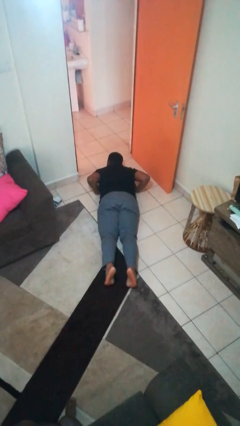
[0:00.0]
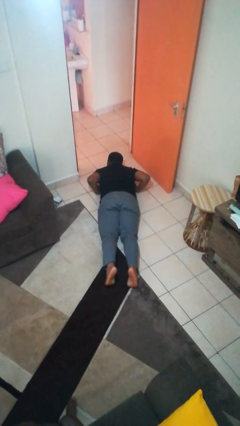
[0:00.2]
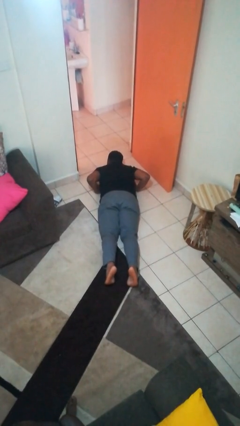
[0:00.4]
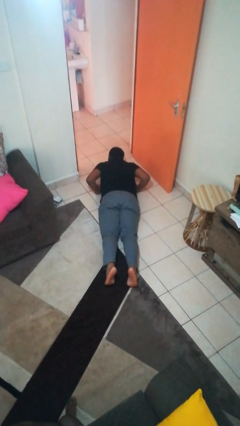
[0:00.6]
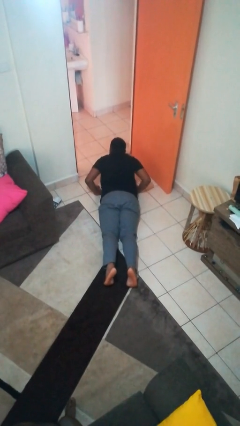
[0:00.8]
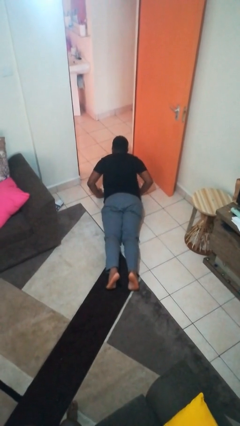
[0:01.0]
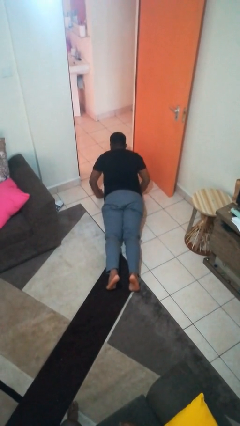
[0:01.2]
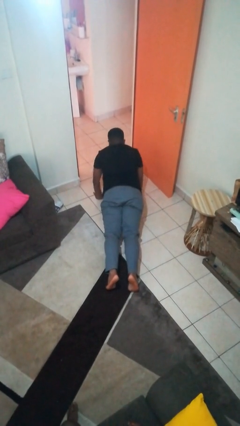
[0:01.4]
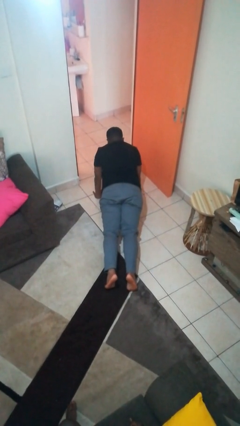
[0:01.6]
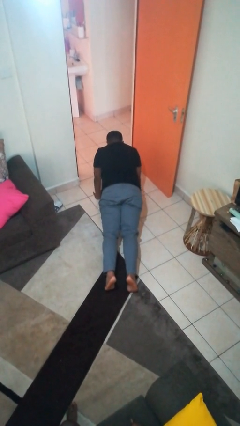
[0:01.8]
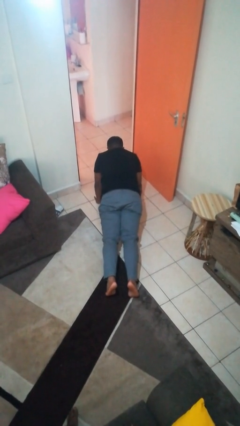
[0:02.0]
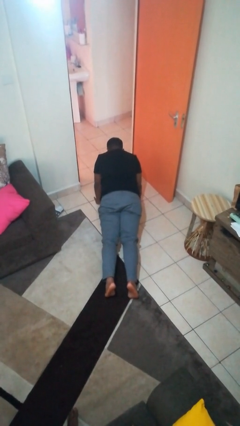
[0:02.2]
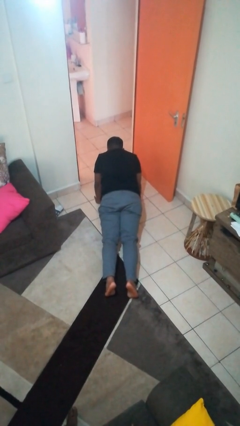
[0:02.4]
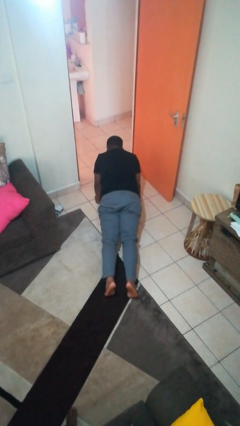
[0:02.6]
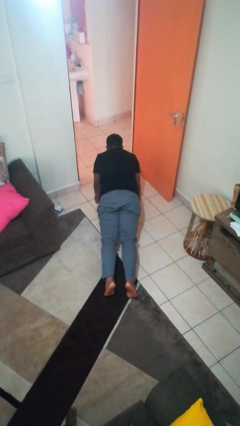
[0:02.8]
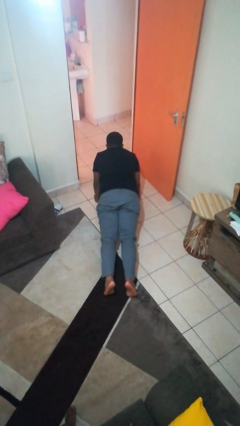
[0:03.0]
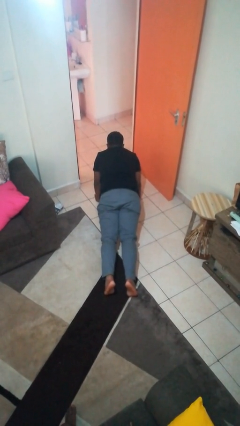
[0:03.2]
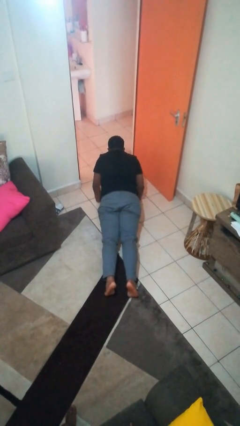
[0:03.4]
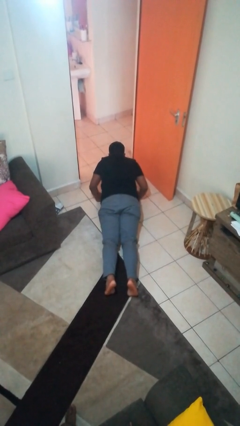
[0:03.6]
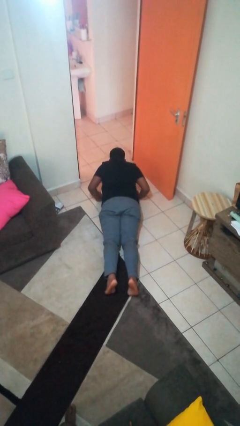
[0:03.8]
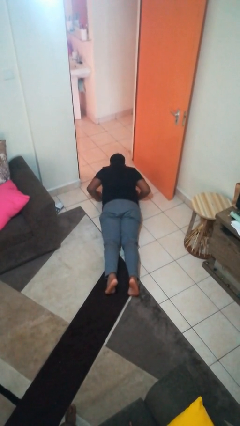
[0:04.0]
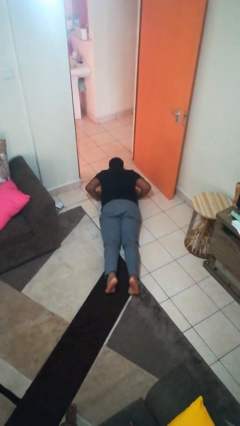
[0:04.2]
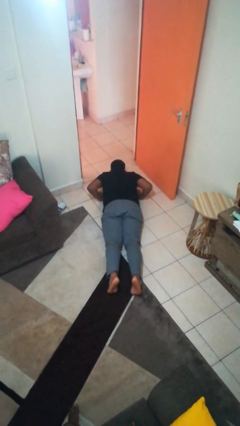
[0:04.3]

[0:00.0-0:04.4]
person exercises with pushup

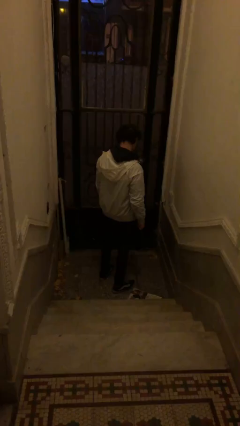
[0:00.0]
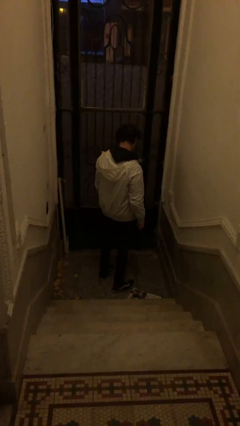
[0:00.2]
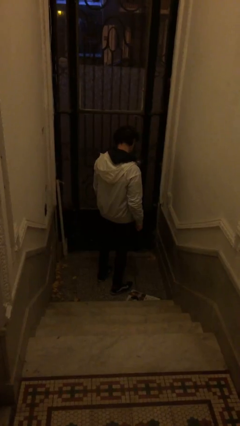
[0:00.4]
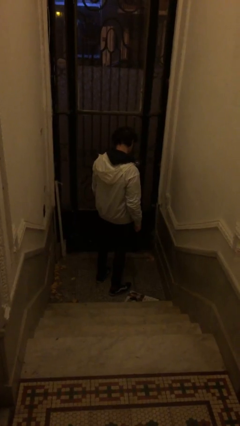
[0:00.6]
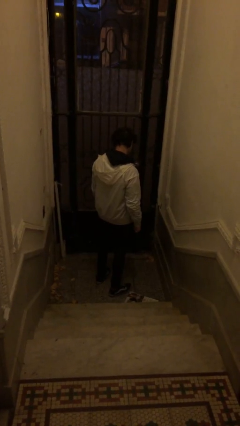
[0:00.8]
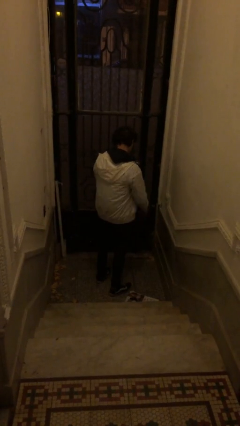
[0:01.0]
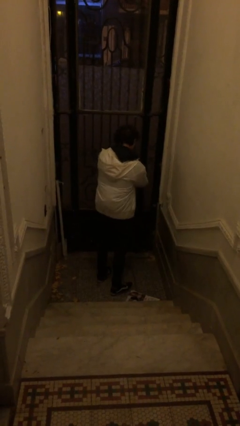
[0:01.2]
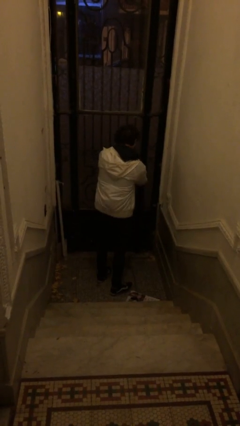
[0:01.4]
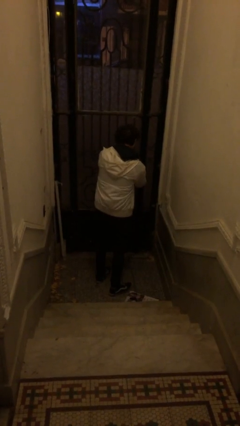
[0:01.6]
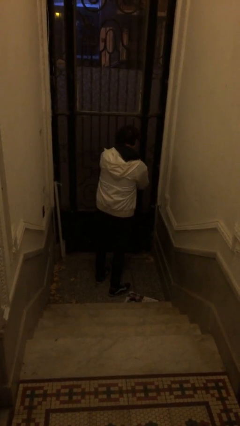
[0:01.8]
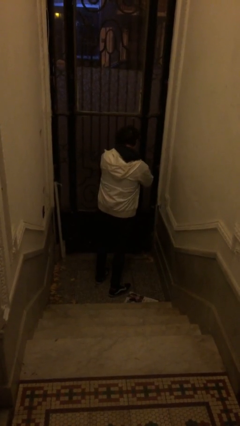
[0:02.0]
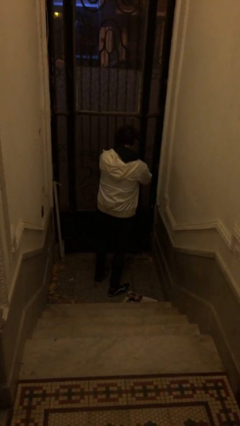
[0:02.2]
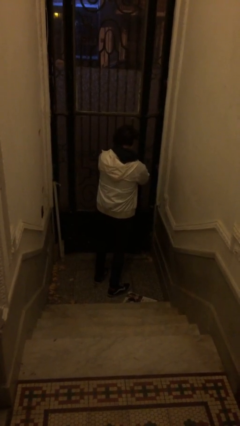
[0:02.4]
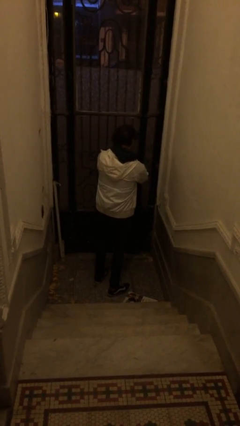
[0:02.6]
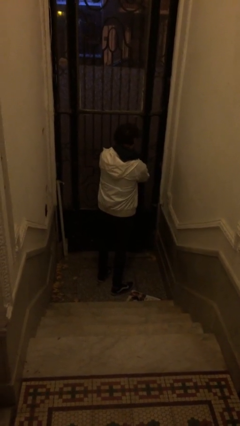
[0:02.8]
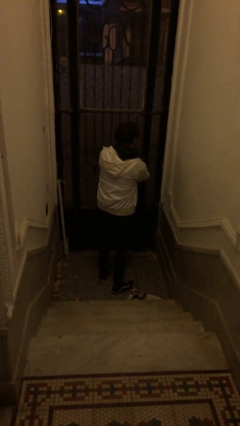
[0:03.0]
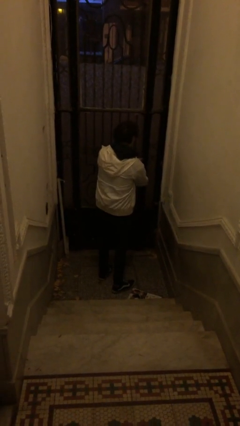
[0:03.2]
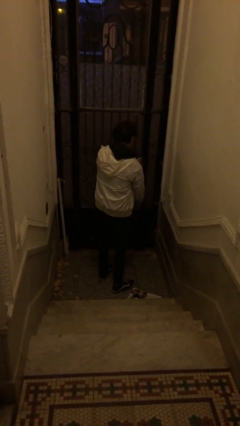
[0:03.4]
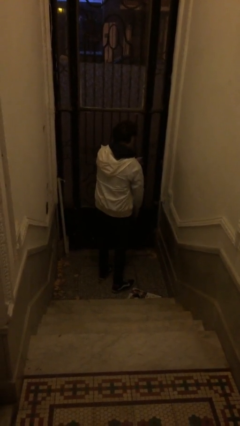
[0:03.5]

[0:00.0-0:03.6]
person unlocks door with keys

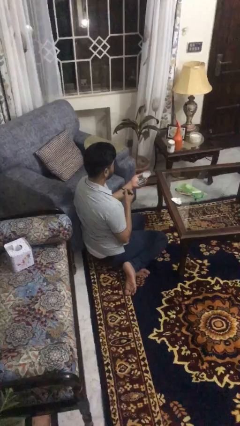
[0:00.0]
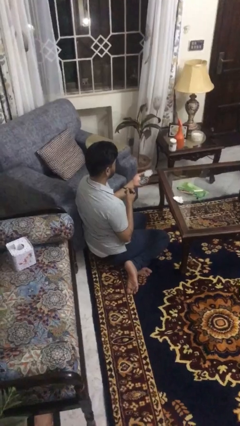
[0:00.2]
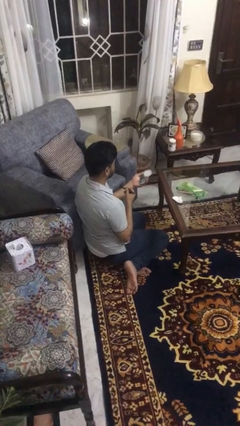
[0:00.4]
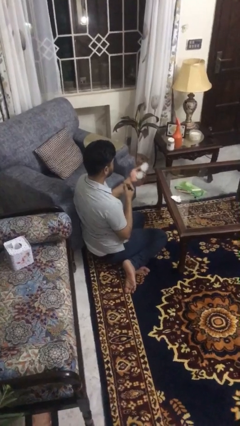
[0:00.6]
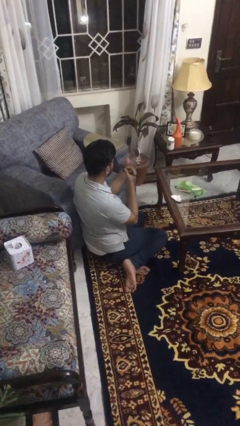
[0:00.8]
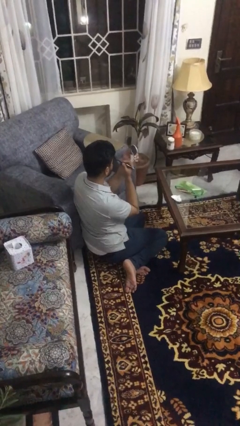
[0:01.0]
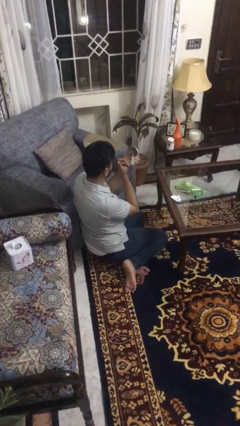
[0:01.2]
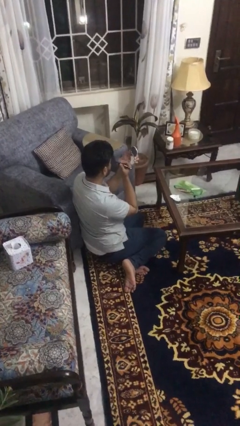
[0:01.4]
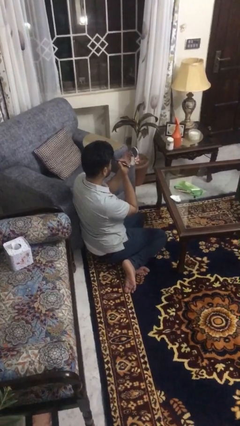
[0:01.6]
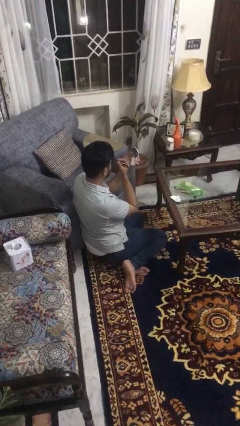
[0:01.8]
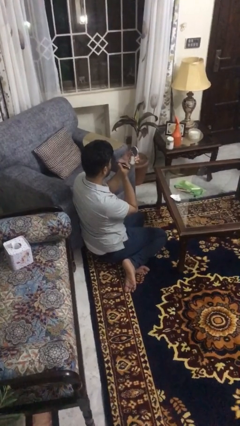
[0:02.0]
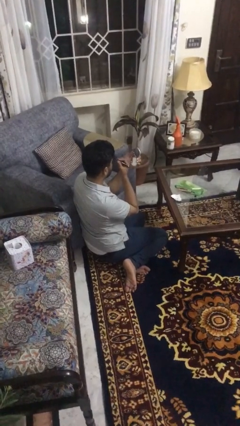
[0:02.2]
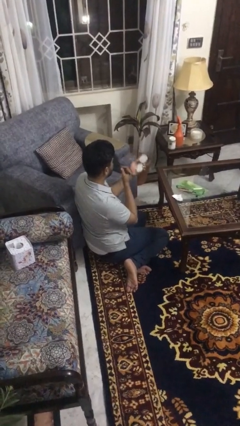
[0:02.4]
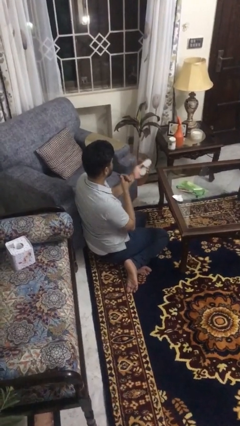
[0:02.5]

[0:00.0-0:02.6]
person applies eye makeup

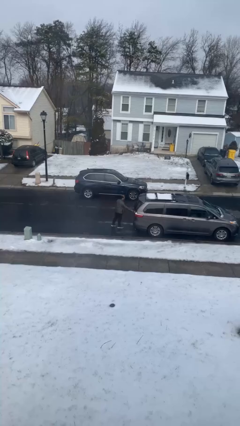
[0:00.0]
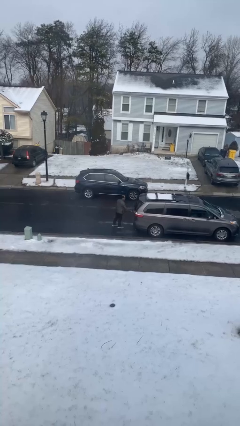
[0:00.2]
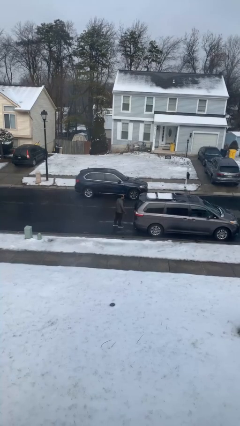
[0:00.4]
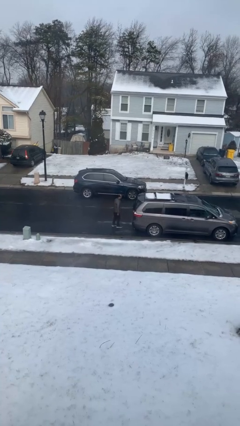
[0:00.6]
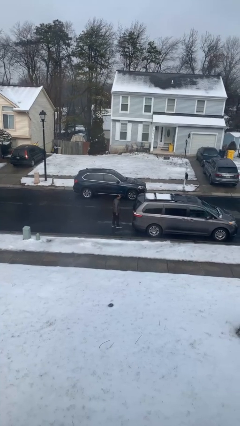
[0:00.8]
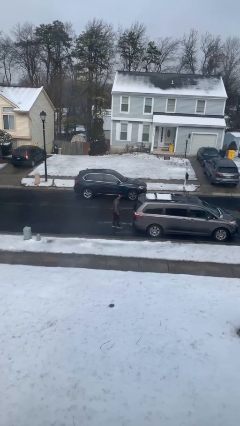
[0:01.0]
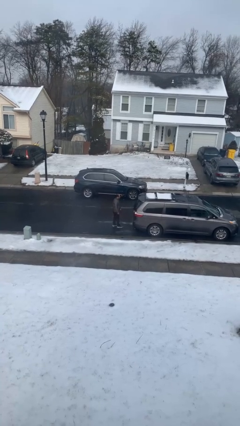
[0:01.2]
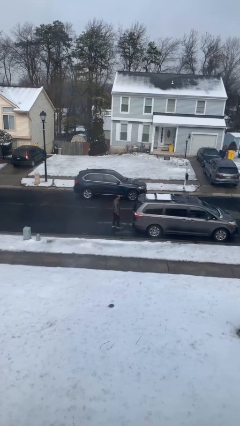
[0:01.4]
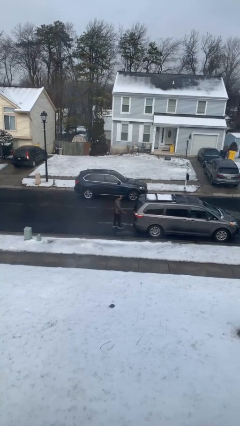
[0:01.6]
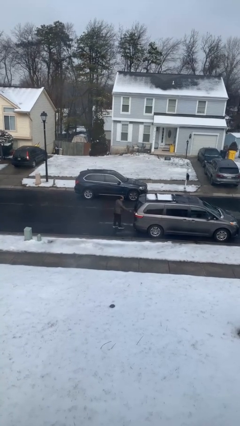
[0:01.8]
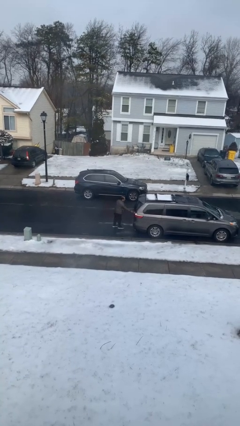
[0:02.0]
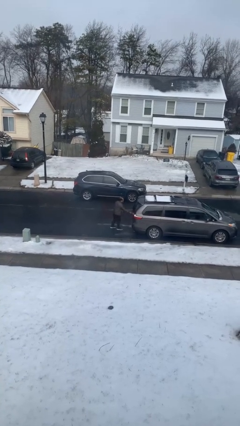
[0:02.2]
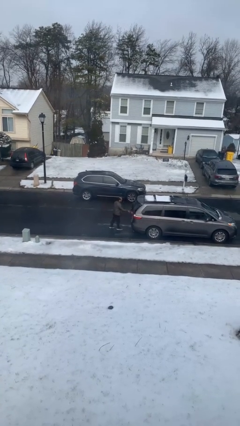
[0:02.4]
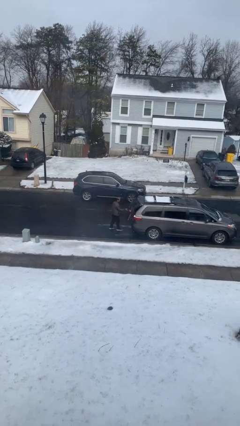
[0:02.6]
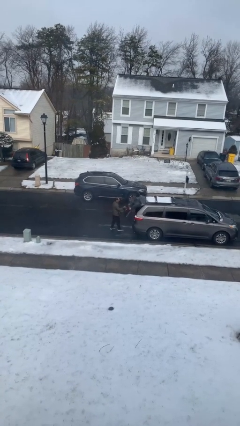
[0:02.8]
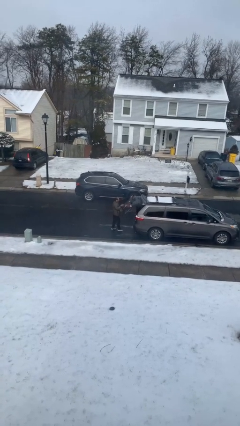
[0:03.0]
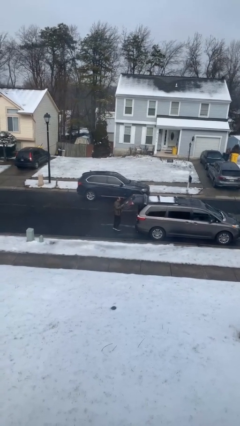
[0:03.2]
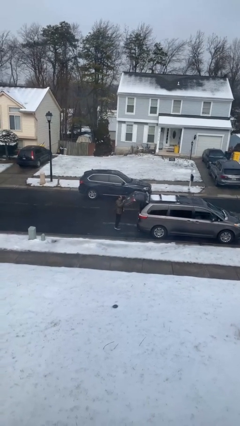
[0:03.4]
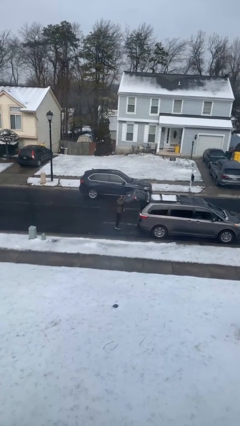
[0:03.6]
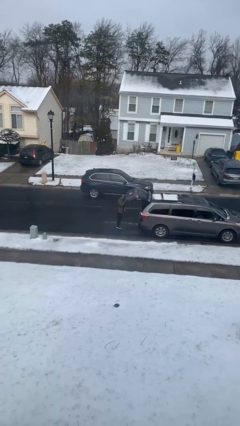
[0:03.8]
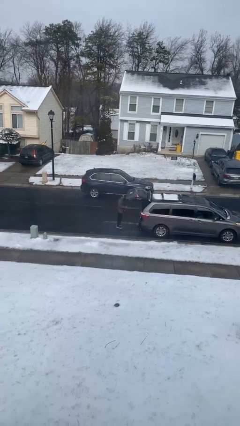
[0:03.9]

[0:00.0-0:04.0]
person opens car trunk

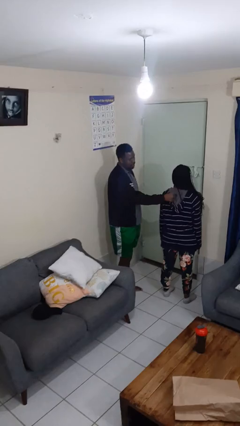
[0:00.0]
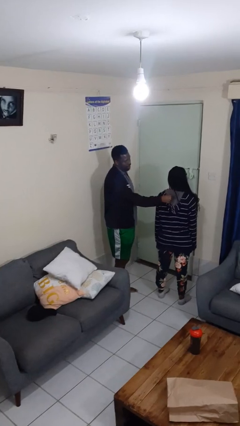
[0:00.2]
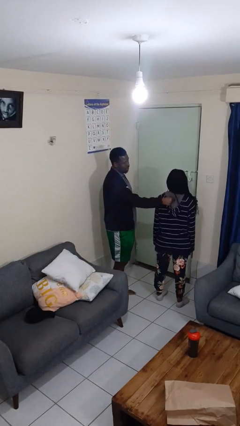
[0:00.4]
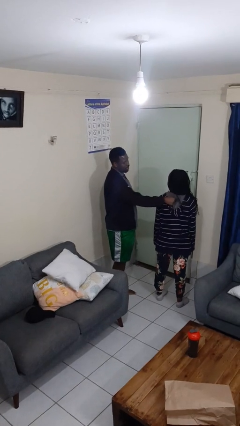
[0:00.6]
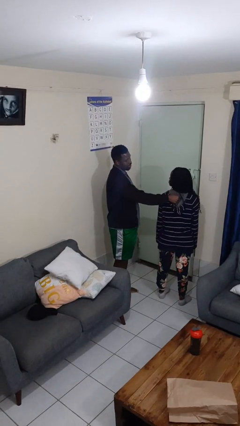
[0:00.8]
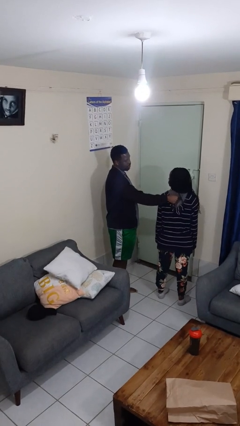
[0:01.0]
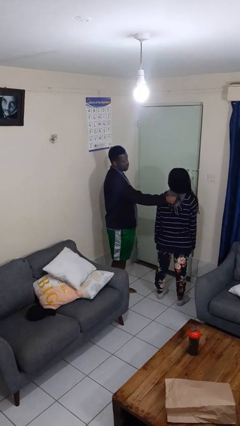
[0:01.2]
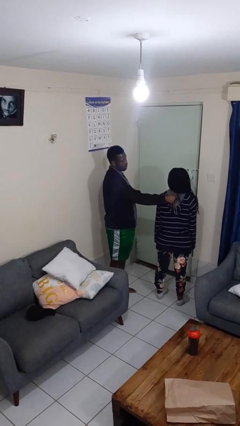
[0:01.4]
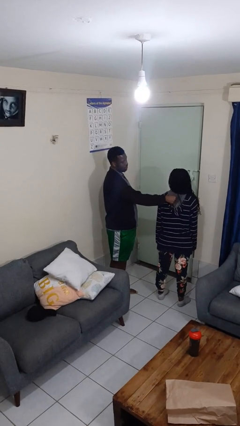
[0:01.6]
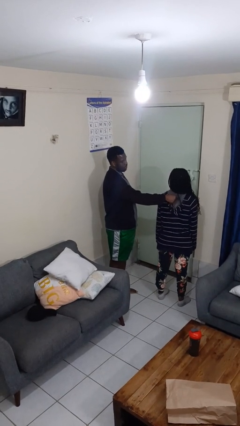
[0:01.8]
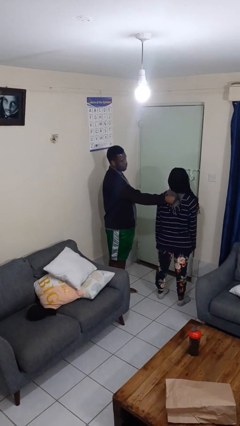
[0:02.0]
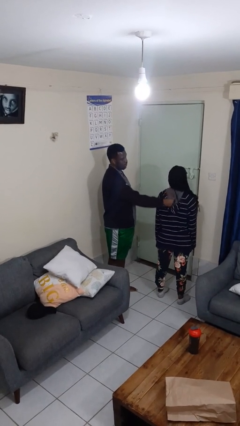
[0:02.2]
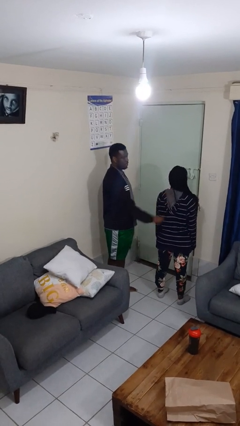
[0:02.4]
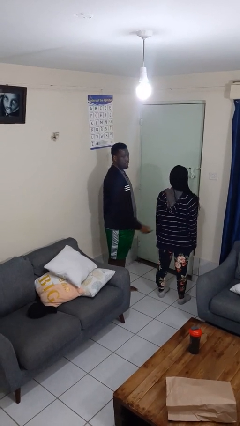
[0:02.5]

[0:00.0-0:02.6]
person touches back of person

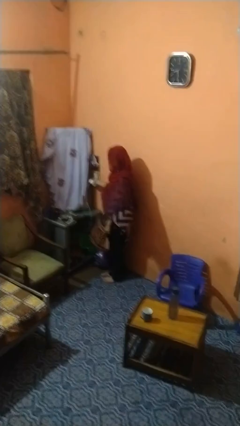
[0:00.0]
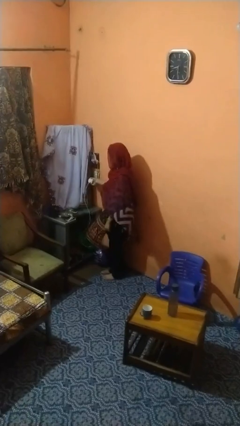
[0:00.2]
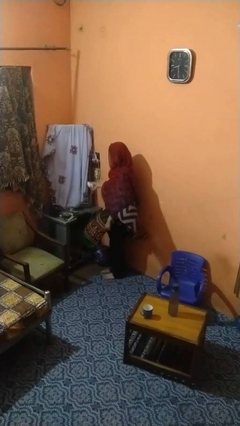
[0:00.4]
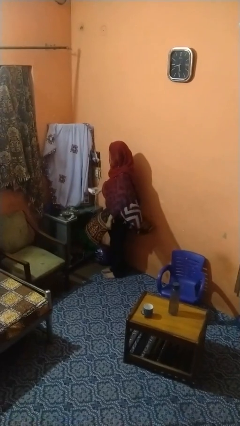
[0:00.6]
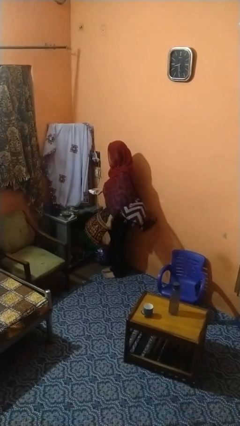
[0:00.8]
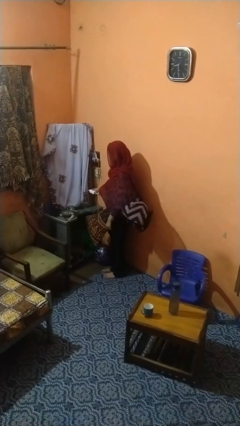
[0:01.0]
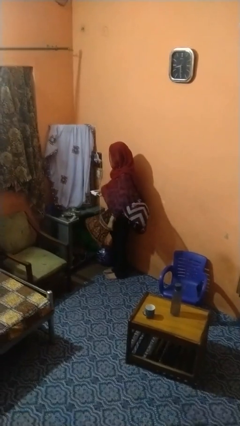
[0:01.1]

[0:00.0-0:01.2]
person unplugs from electrical socket
